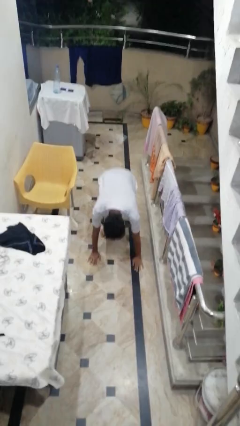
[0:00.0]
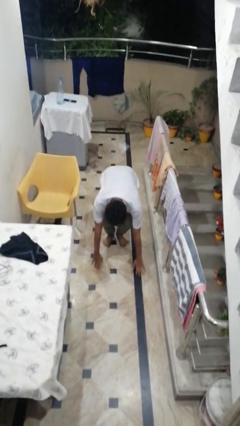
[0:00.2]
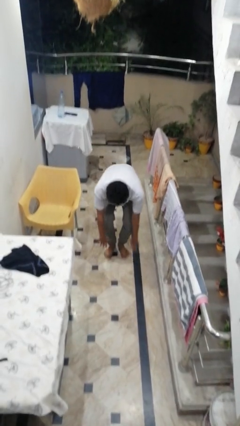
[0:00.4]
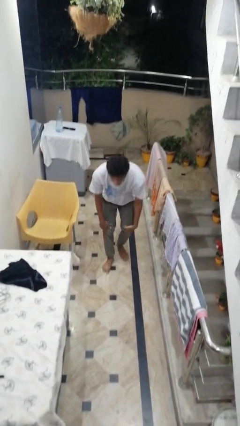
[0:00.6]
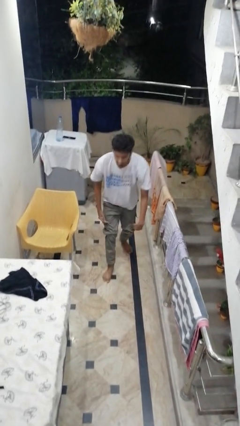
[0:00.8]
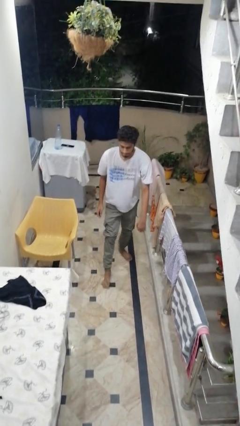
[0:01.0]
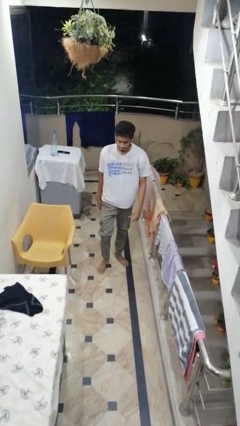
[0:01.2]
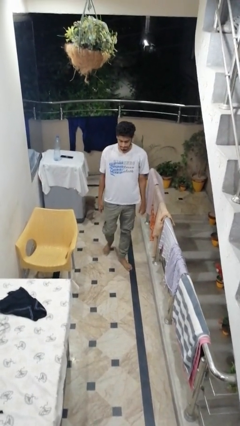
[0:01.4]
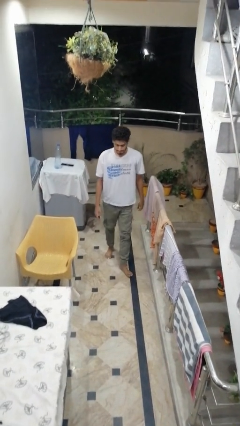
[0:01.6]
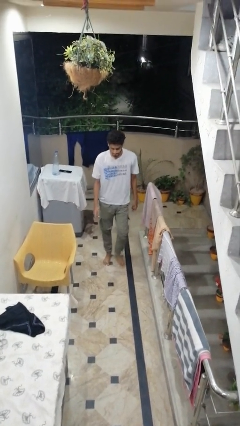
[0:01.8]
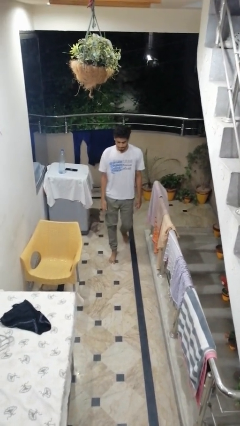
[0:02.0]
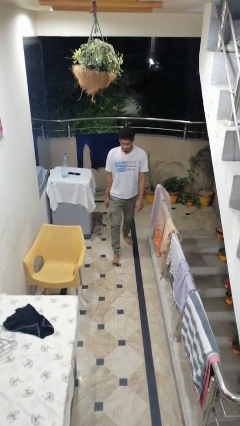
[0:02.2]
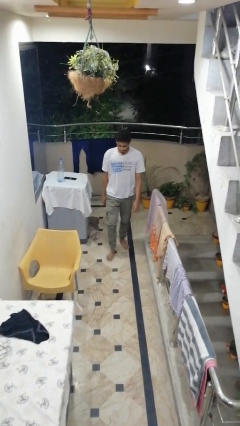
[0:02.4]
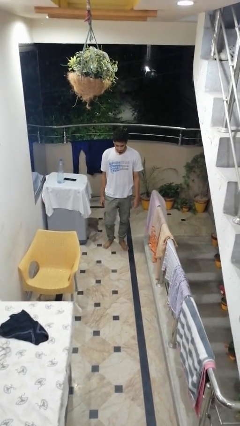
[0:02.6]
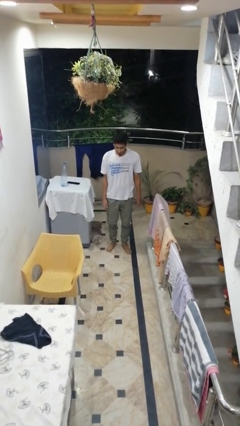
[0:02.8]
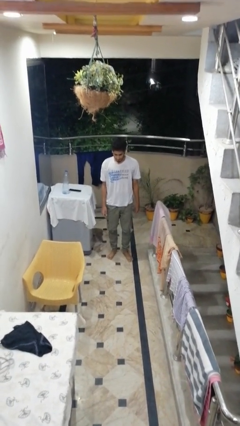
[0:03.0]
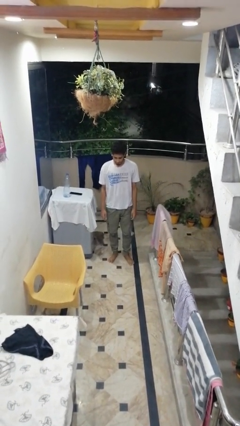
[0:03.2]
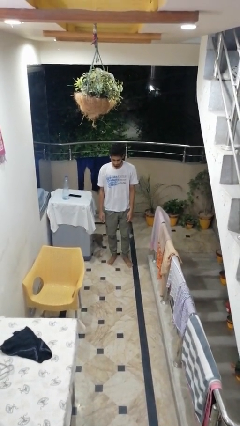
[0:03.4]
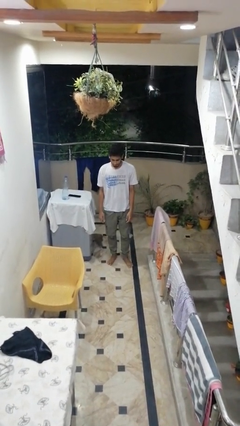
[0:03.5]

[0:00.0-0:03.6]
person stands up from floor

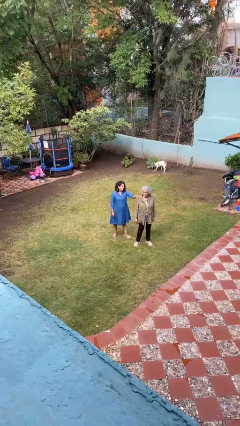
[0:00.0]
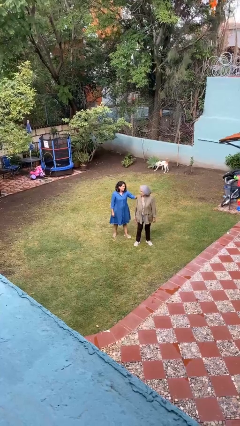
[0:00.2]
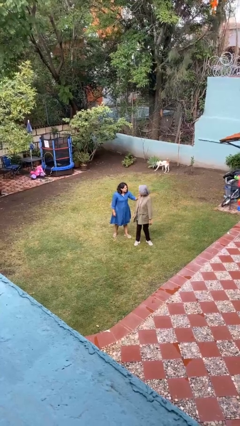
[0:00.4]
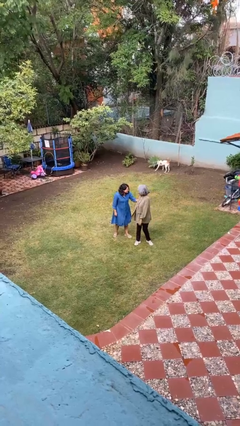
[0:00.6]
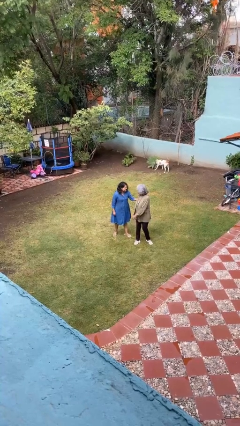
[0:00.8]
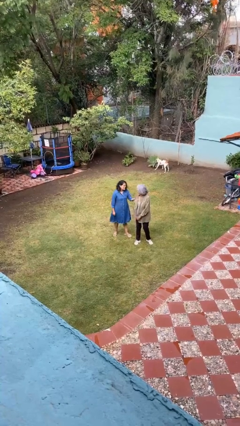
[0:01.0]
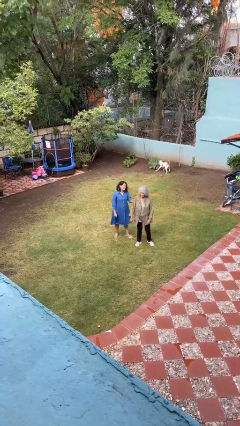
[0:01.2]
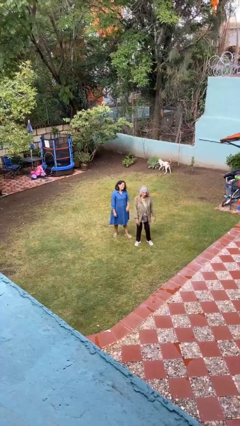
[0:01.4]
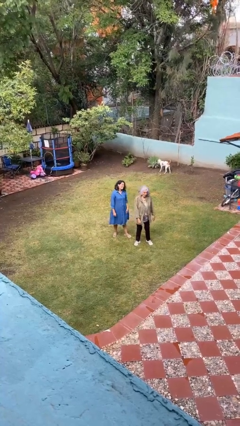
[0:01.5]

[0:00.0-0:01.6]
person spins person around

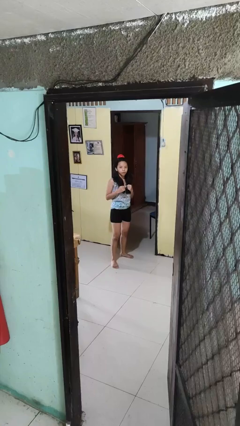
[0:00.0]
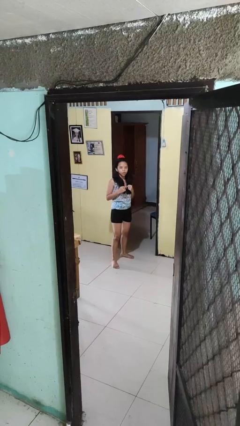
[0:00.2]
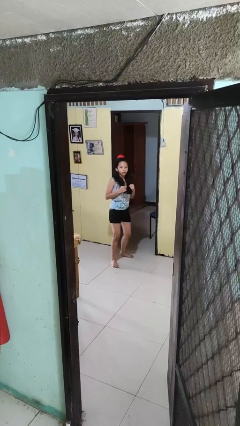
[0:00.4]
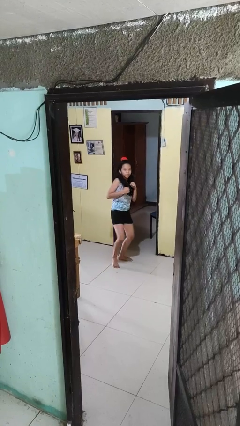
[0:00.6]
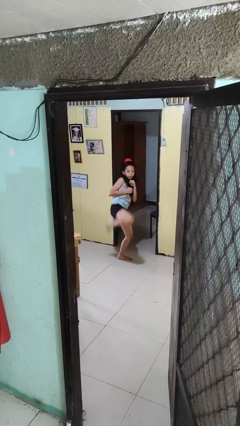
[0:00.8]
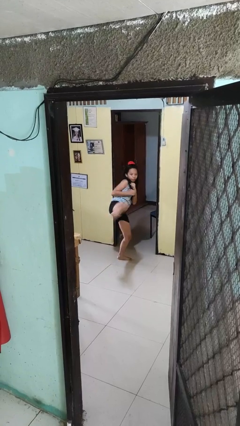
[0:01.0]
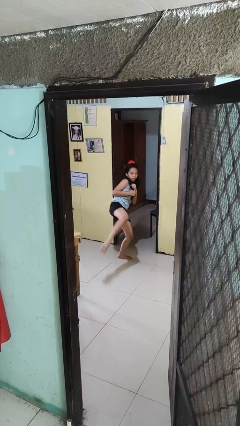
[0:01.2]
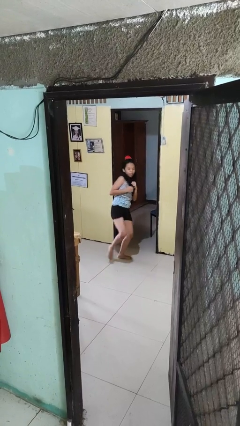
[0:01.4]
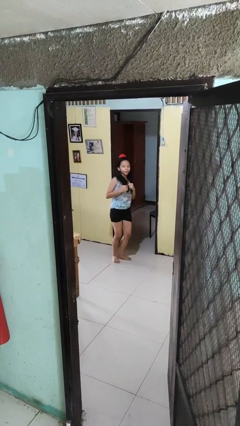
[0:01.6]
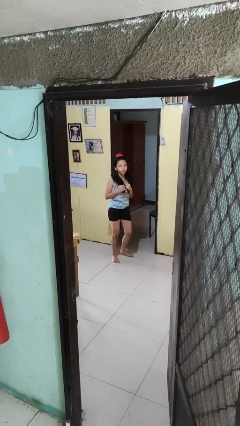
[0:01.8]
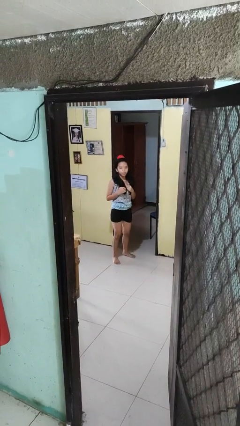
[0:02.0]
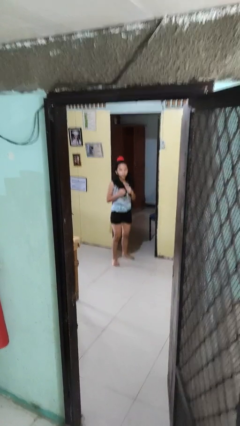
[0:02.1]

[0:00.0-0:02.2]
person karate kicks

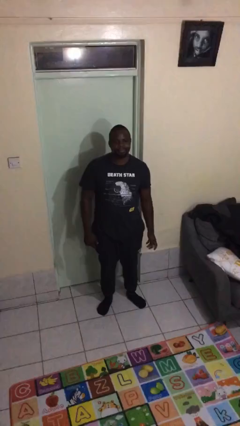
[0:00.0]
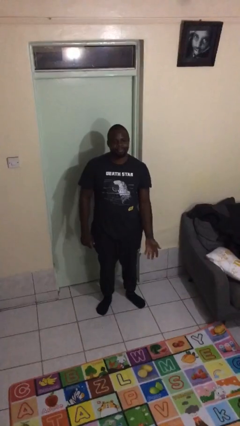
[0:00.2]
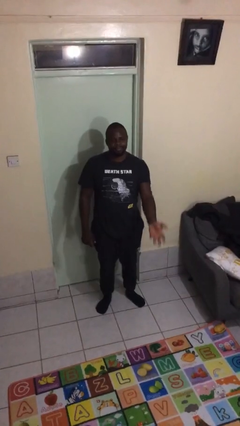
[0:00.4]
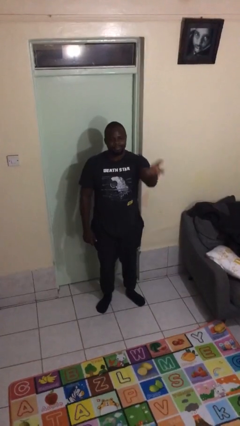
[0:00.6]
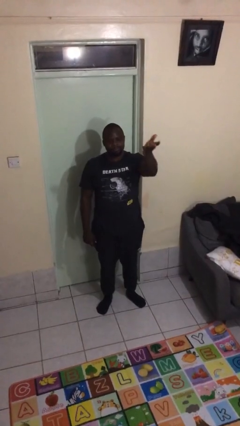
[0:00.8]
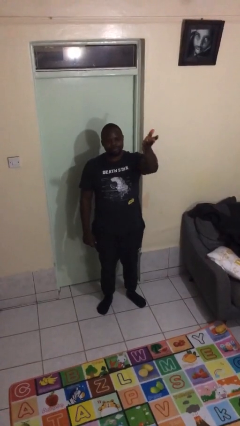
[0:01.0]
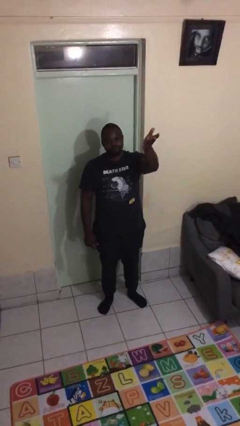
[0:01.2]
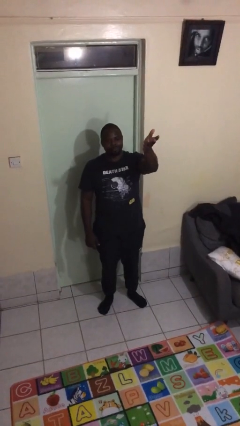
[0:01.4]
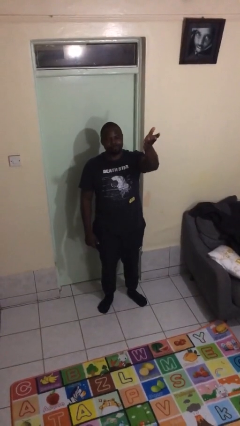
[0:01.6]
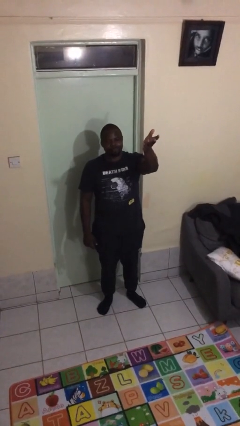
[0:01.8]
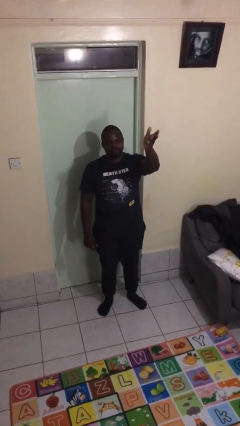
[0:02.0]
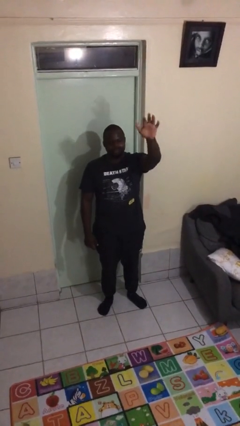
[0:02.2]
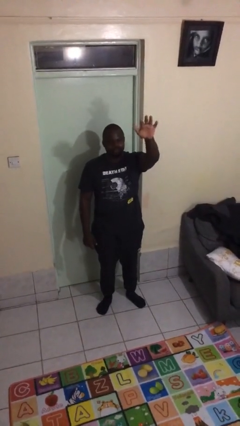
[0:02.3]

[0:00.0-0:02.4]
person gestures swipe up

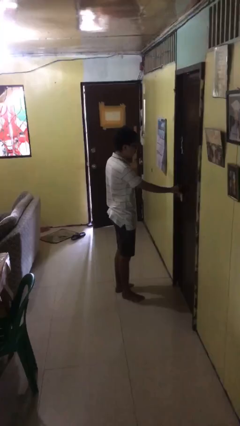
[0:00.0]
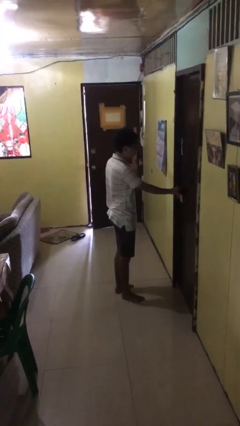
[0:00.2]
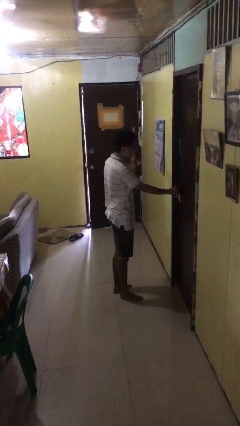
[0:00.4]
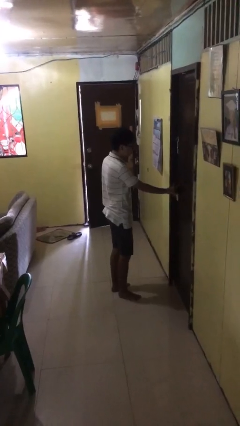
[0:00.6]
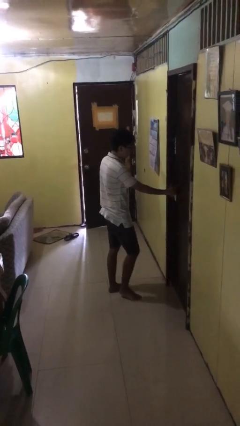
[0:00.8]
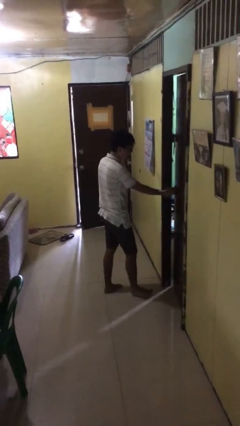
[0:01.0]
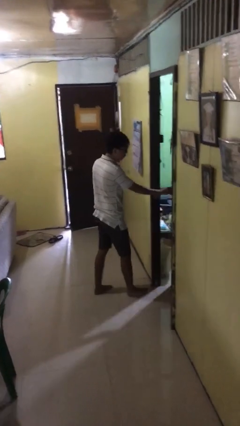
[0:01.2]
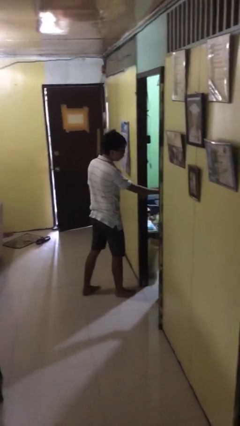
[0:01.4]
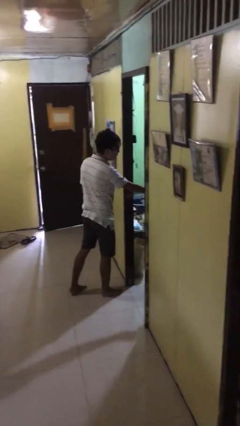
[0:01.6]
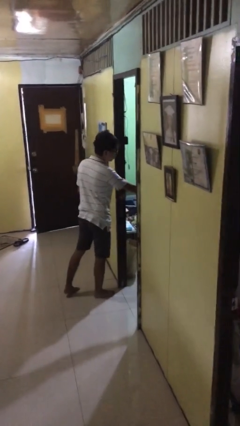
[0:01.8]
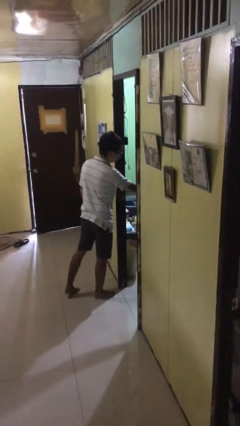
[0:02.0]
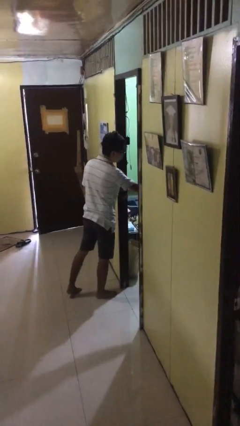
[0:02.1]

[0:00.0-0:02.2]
person opens facility door

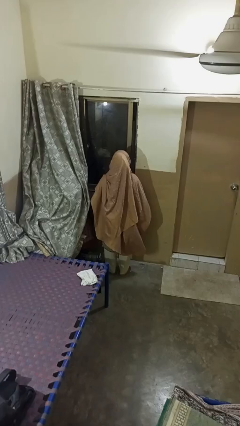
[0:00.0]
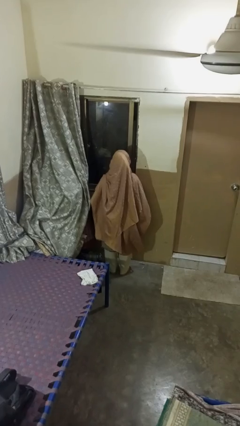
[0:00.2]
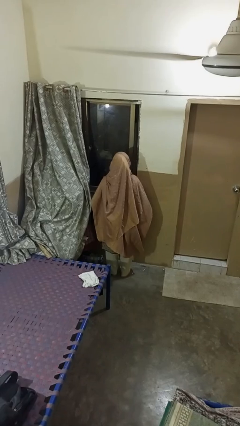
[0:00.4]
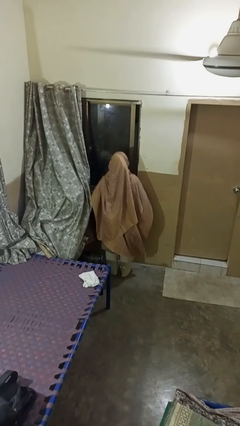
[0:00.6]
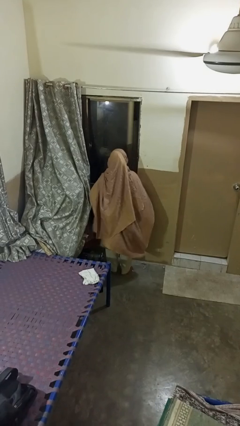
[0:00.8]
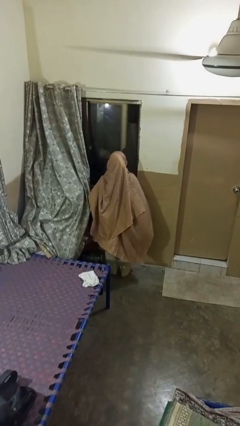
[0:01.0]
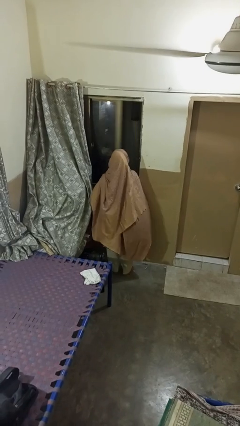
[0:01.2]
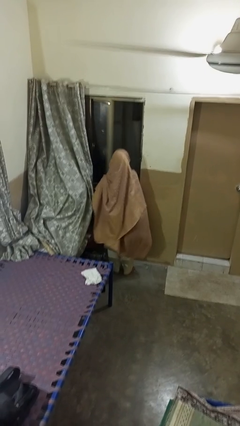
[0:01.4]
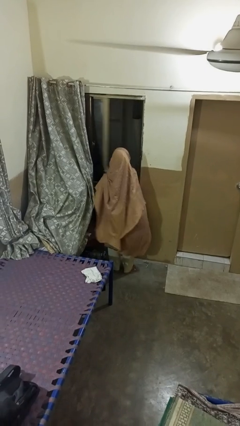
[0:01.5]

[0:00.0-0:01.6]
person opens home window

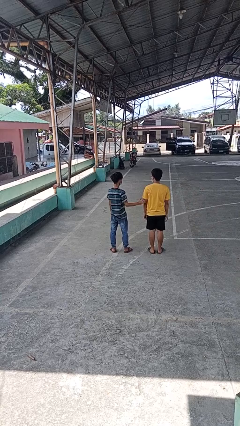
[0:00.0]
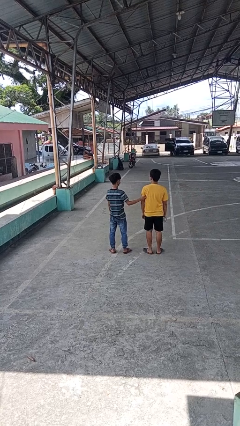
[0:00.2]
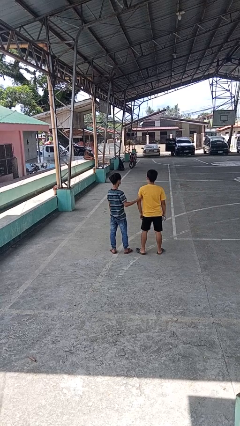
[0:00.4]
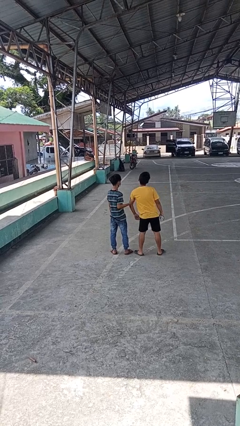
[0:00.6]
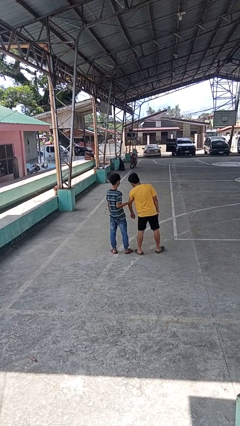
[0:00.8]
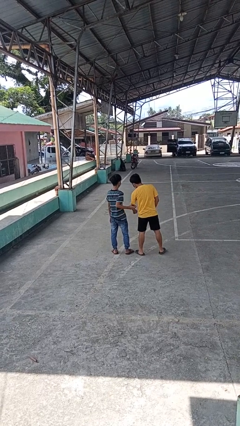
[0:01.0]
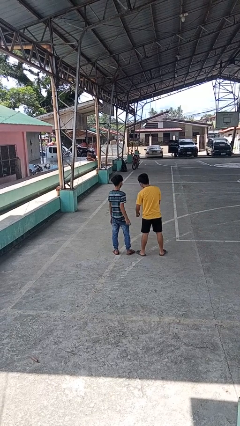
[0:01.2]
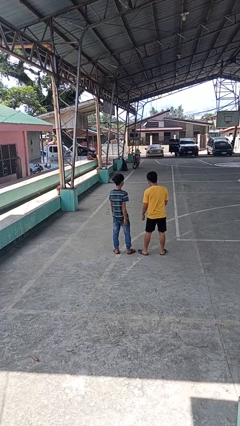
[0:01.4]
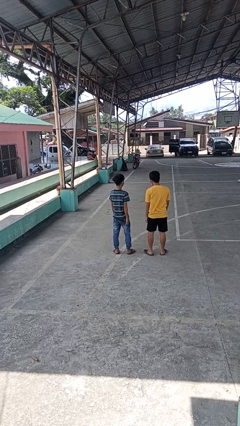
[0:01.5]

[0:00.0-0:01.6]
person grabs person by bicep

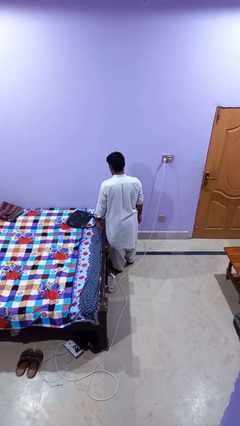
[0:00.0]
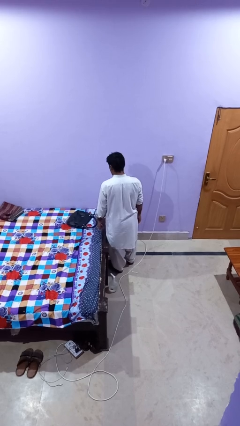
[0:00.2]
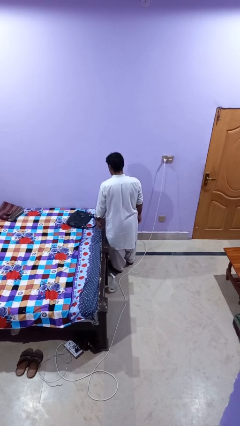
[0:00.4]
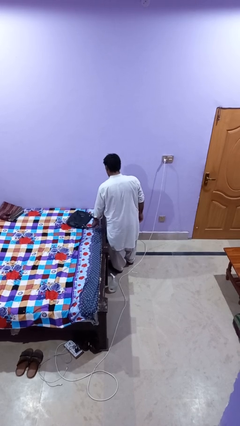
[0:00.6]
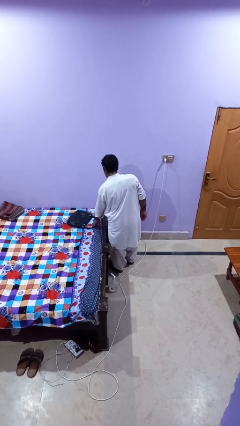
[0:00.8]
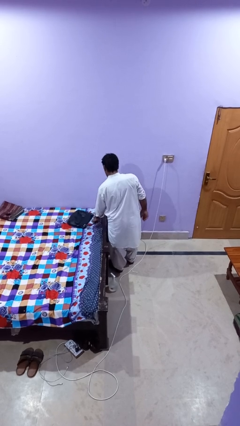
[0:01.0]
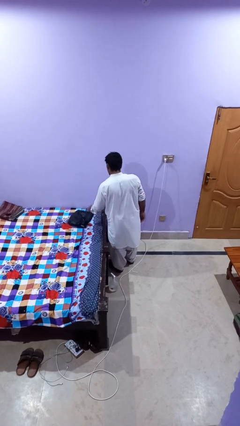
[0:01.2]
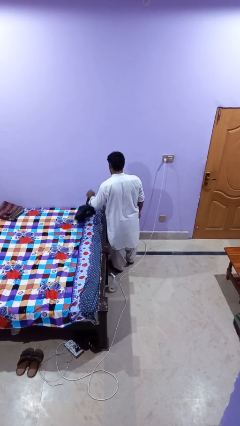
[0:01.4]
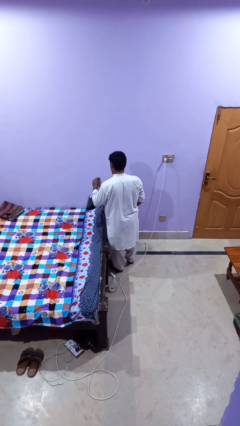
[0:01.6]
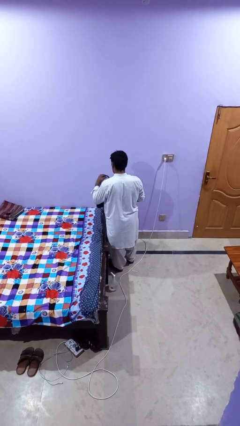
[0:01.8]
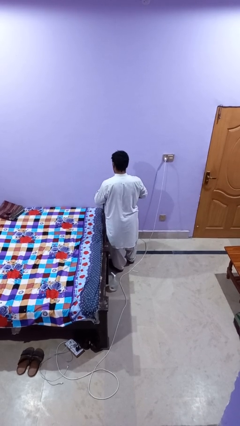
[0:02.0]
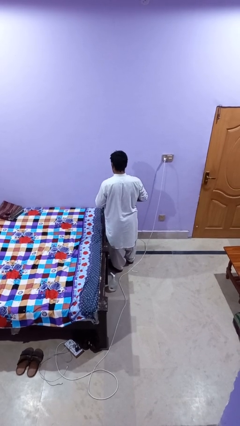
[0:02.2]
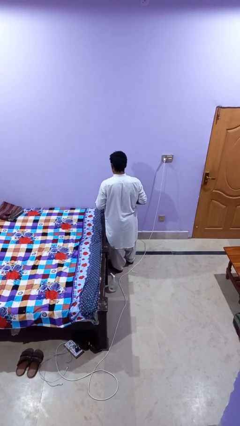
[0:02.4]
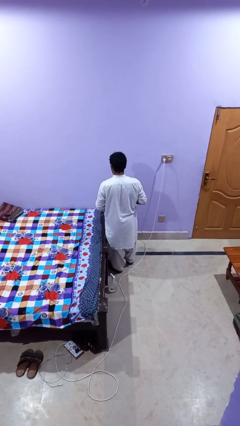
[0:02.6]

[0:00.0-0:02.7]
person picks up object from bed
